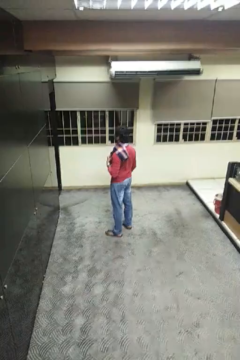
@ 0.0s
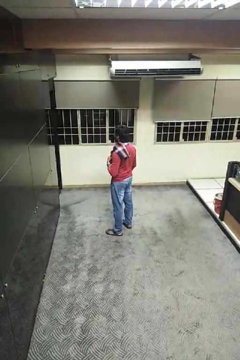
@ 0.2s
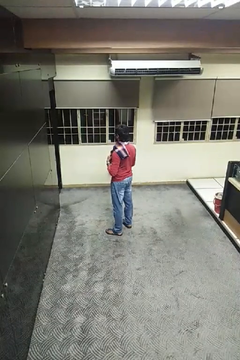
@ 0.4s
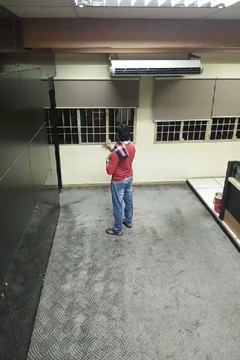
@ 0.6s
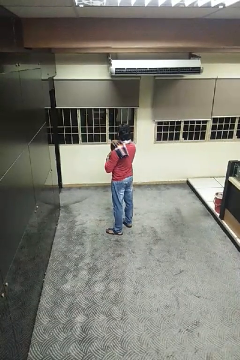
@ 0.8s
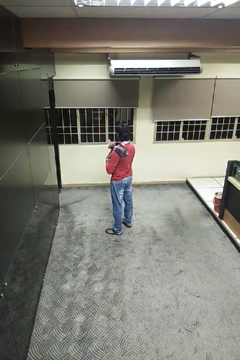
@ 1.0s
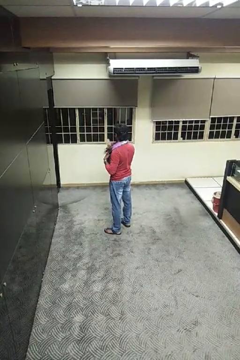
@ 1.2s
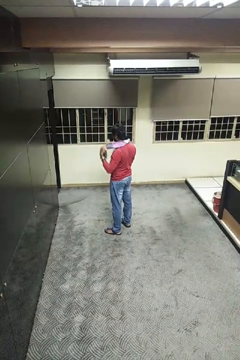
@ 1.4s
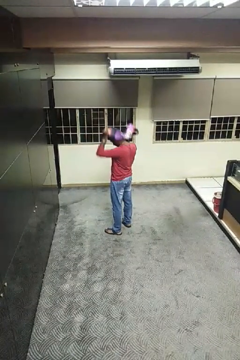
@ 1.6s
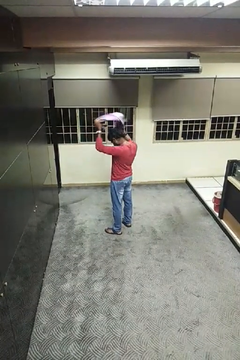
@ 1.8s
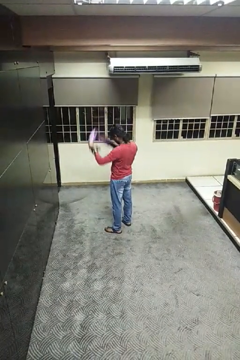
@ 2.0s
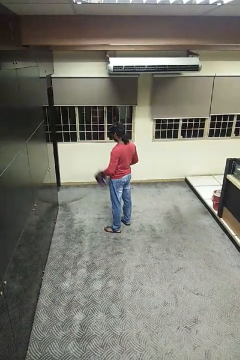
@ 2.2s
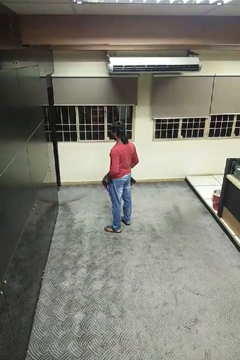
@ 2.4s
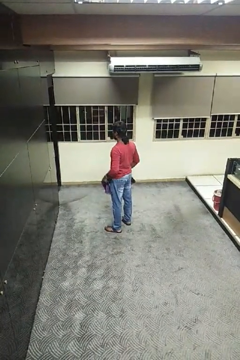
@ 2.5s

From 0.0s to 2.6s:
person takes off scarf

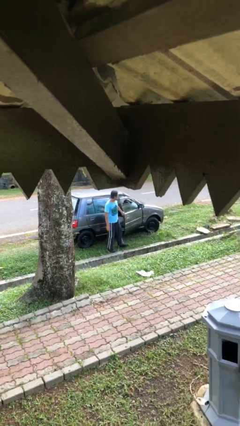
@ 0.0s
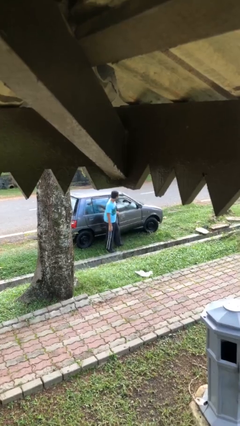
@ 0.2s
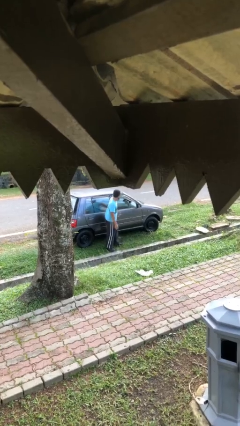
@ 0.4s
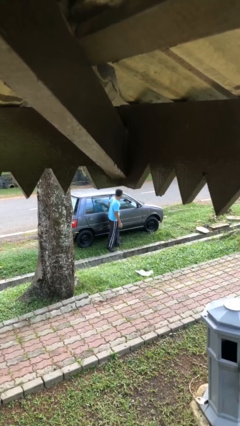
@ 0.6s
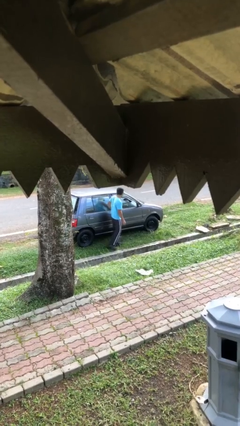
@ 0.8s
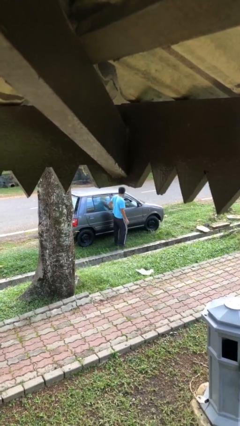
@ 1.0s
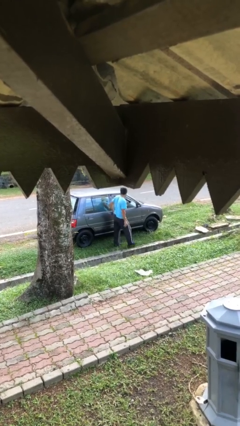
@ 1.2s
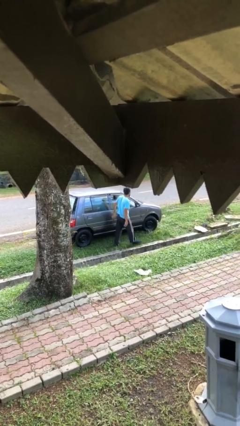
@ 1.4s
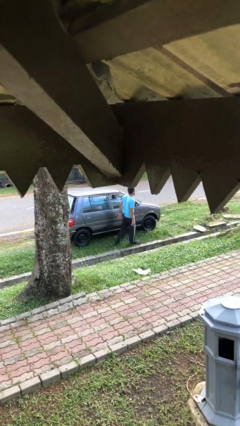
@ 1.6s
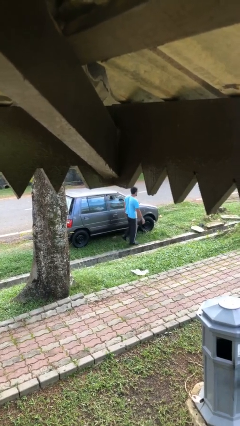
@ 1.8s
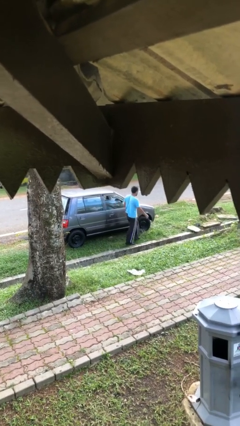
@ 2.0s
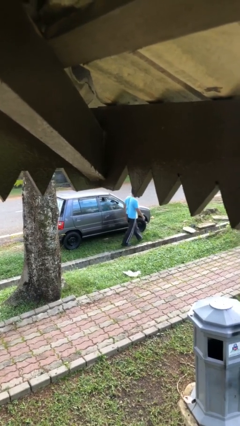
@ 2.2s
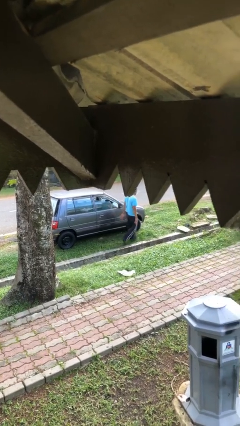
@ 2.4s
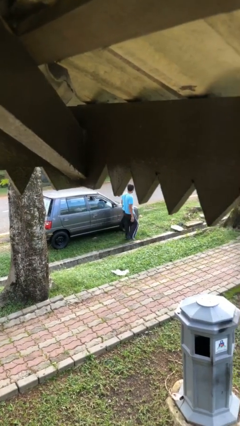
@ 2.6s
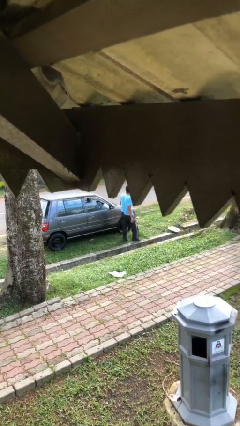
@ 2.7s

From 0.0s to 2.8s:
person closes car door

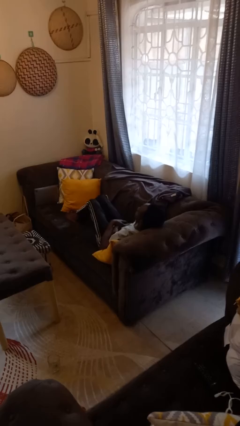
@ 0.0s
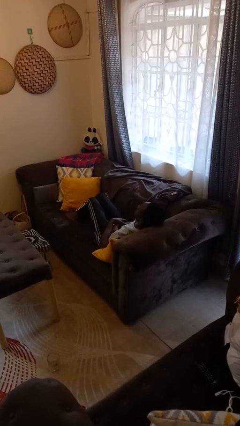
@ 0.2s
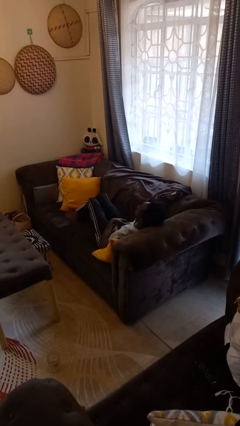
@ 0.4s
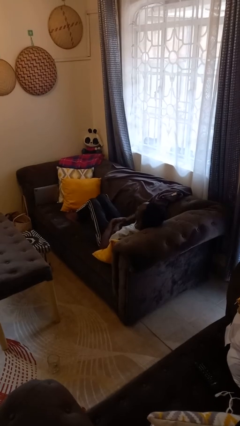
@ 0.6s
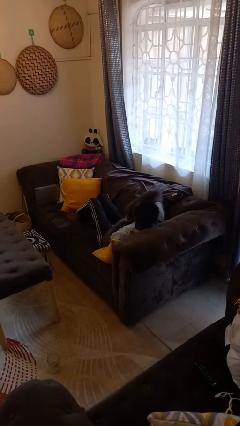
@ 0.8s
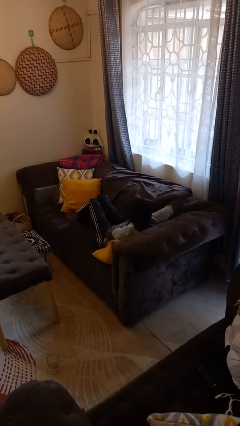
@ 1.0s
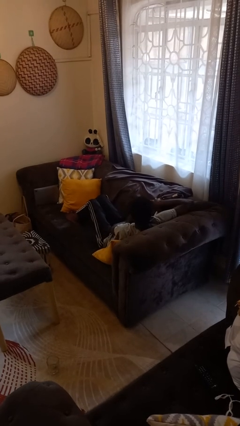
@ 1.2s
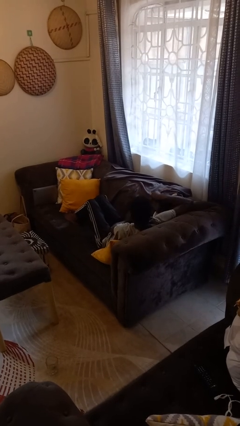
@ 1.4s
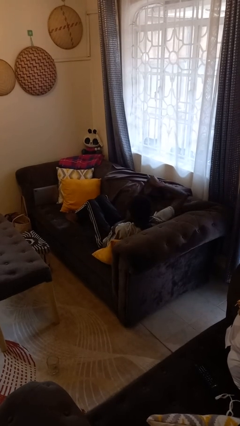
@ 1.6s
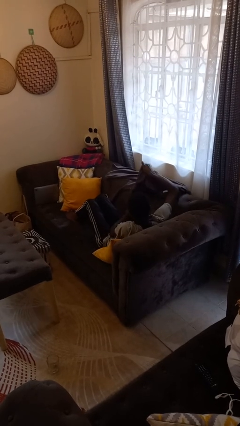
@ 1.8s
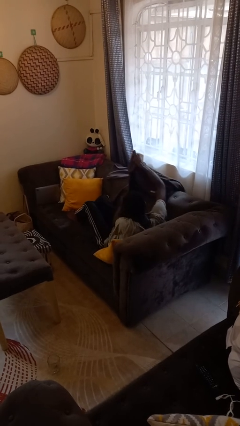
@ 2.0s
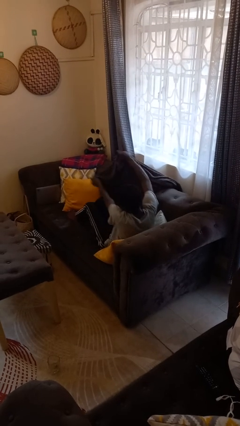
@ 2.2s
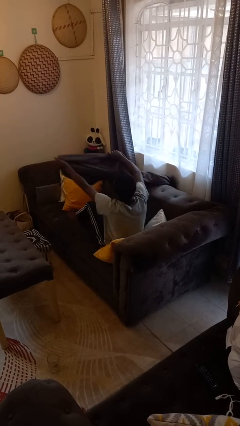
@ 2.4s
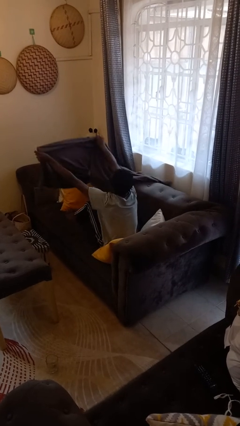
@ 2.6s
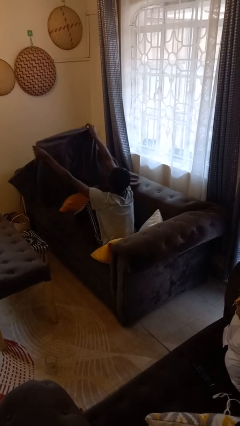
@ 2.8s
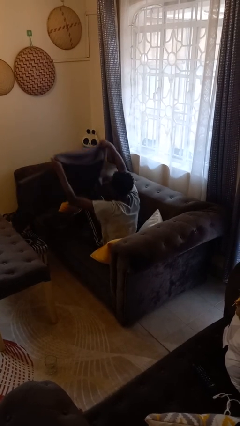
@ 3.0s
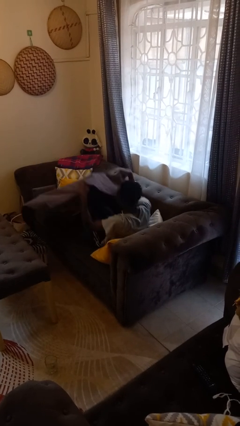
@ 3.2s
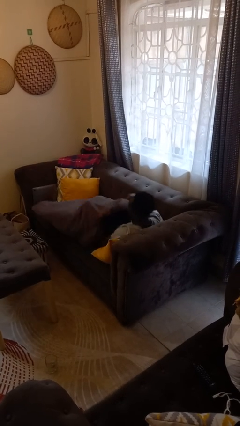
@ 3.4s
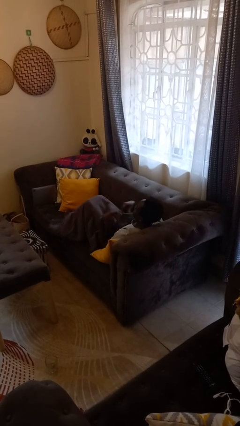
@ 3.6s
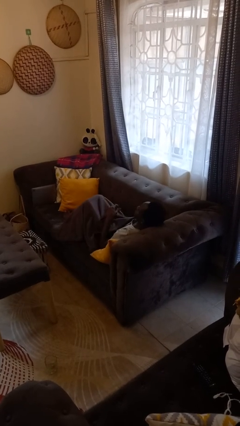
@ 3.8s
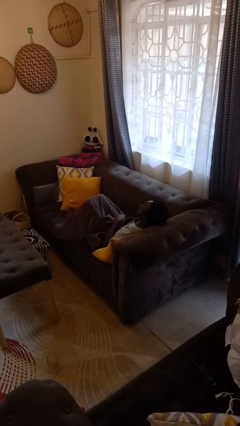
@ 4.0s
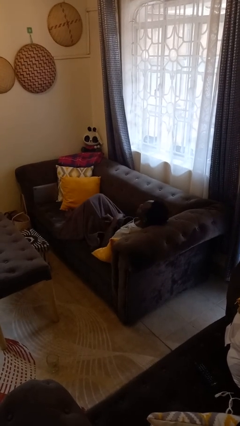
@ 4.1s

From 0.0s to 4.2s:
person covers with blanket

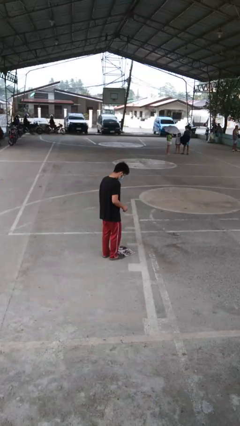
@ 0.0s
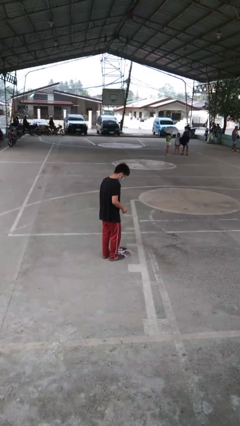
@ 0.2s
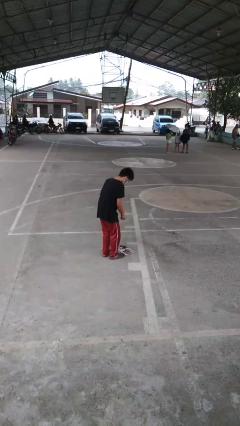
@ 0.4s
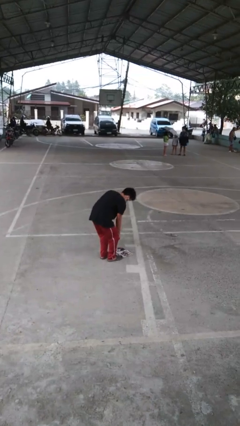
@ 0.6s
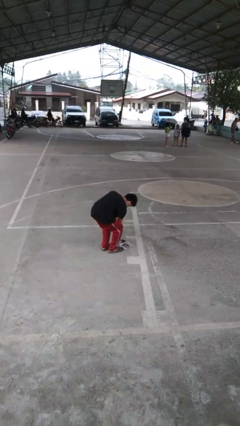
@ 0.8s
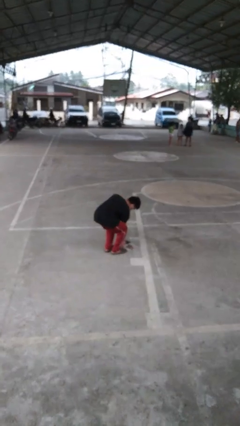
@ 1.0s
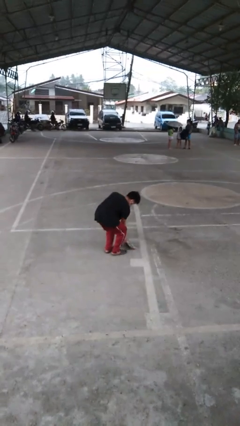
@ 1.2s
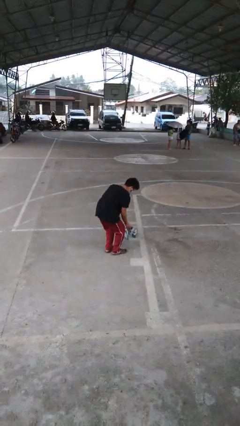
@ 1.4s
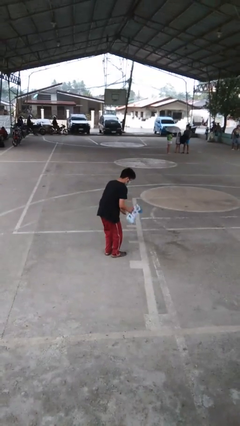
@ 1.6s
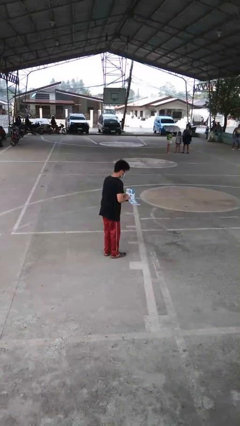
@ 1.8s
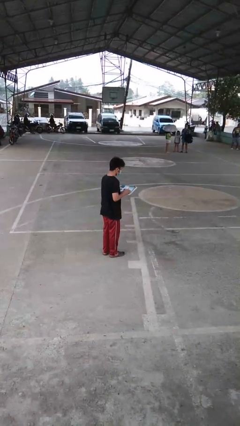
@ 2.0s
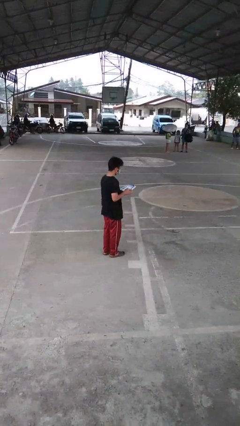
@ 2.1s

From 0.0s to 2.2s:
person picks up object from floor

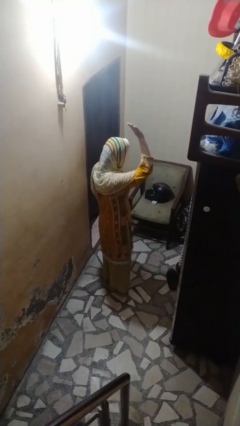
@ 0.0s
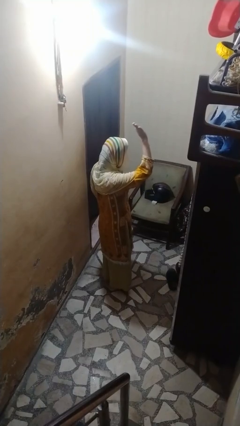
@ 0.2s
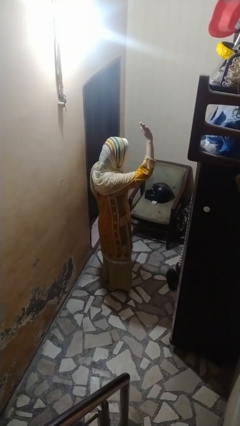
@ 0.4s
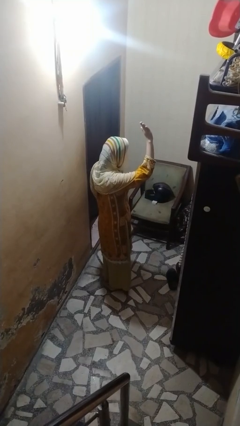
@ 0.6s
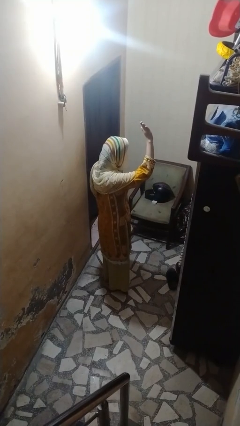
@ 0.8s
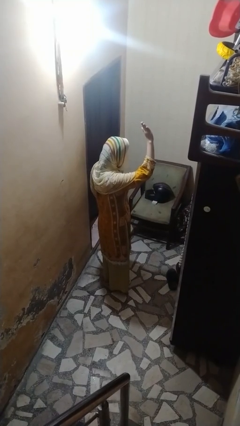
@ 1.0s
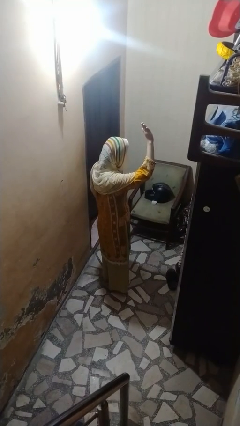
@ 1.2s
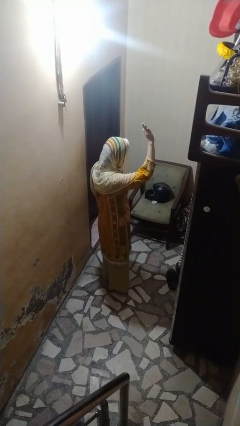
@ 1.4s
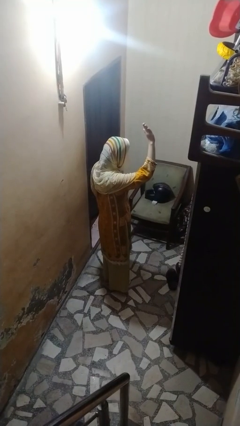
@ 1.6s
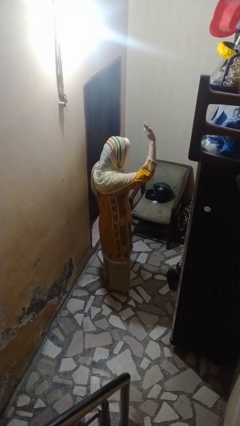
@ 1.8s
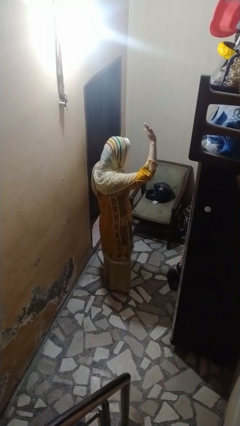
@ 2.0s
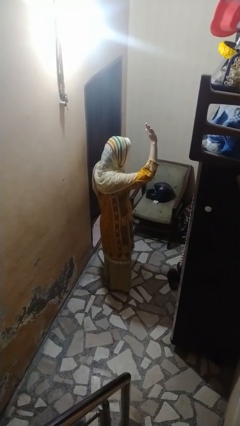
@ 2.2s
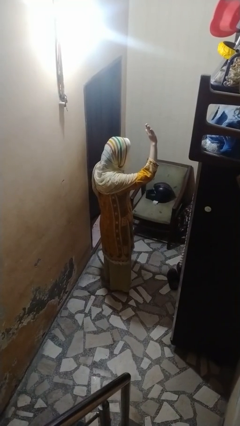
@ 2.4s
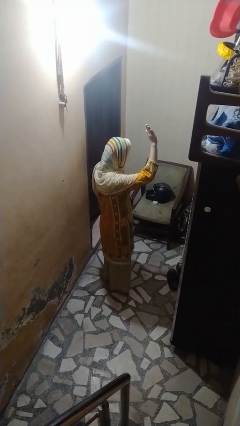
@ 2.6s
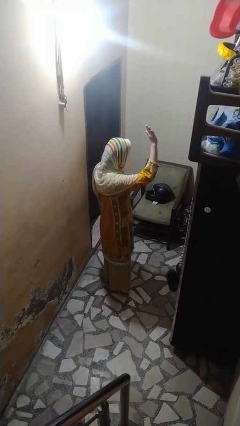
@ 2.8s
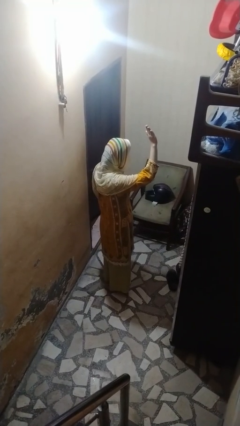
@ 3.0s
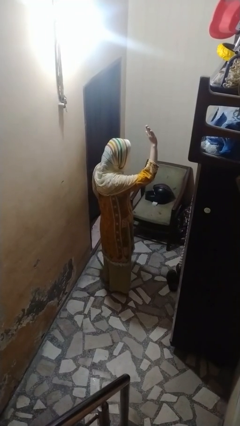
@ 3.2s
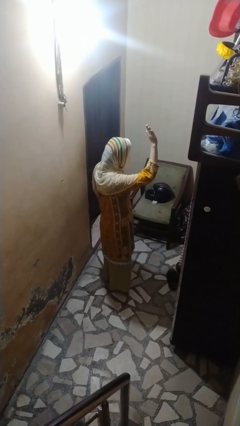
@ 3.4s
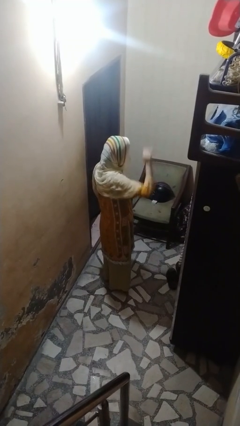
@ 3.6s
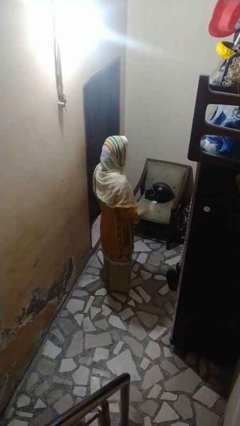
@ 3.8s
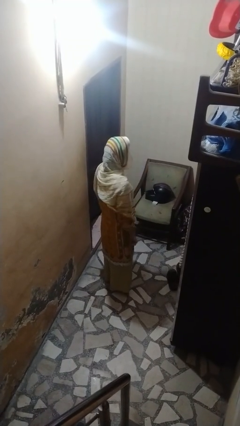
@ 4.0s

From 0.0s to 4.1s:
person gestures raise hand

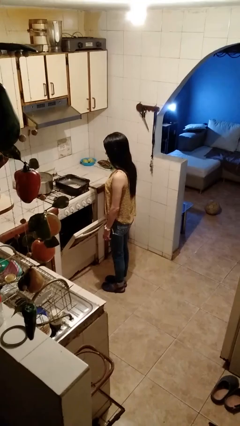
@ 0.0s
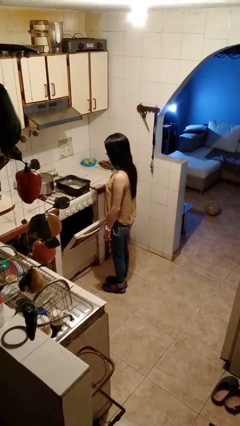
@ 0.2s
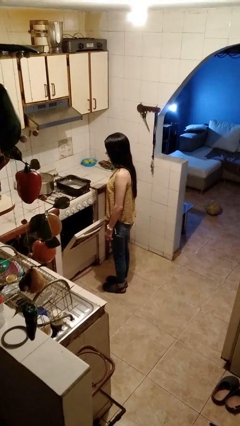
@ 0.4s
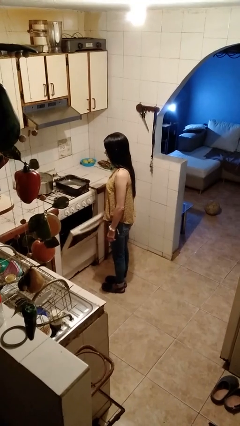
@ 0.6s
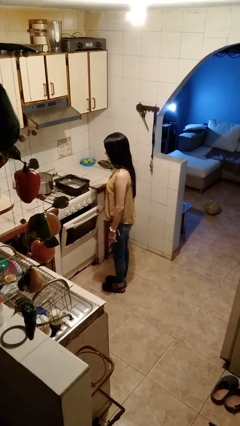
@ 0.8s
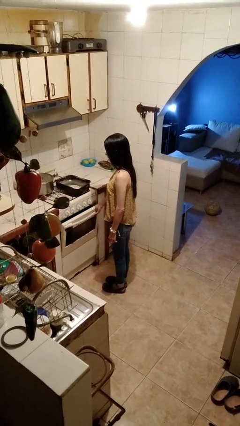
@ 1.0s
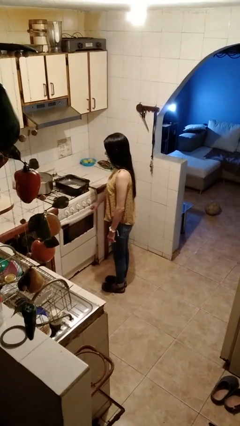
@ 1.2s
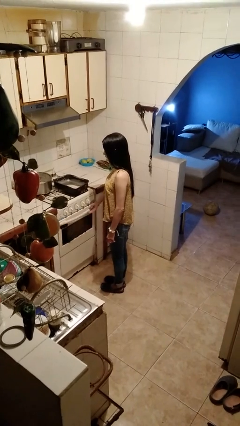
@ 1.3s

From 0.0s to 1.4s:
person closes oven door

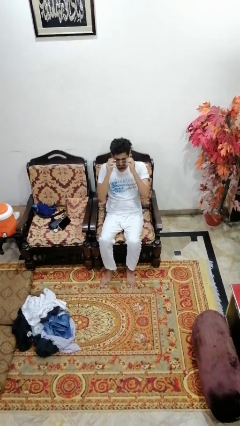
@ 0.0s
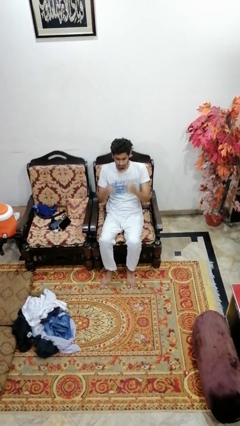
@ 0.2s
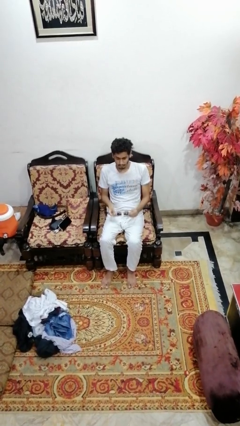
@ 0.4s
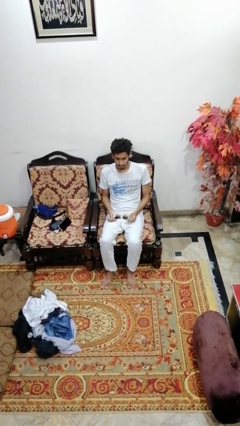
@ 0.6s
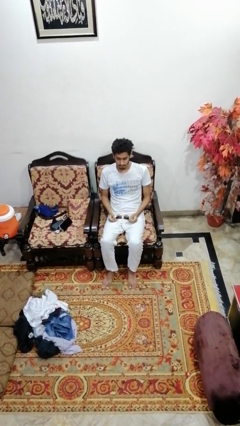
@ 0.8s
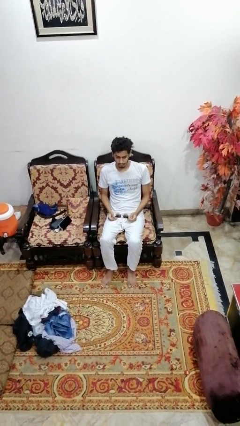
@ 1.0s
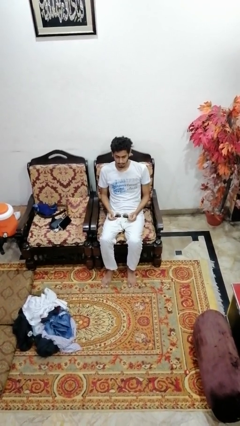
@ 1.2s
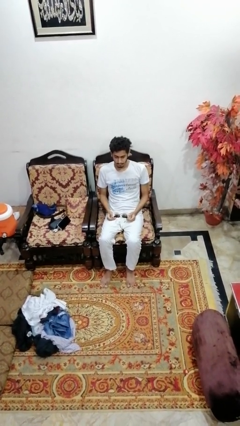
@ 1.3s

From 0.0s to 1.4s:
person takes off sunglasses
